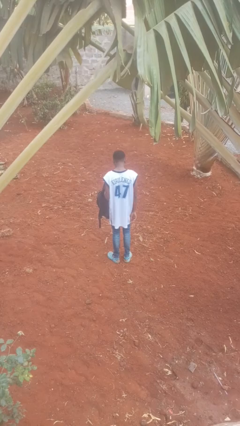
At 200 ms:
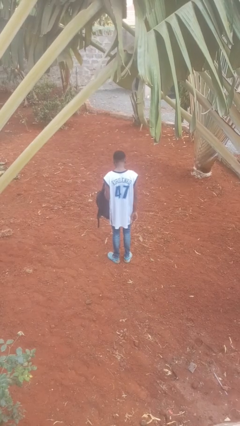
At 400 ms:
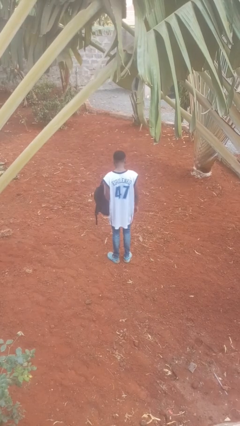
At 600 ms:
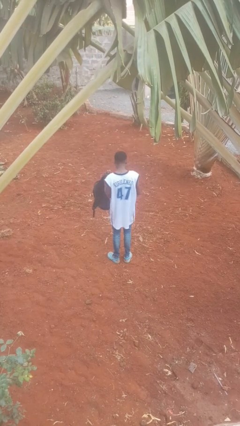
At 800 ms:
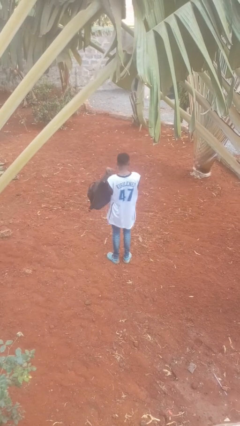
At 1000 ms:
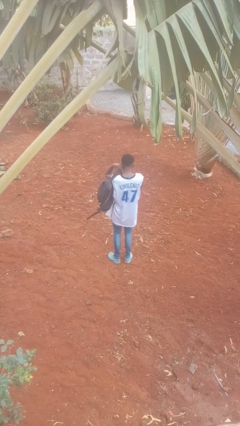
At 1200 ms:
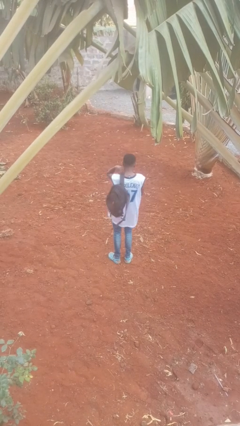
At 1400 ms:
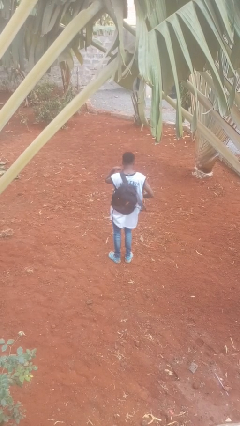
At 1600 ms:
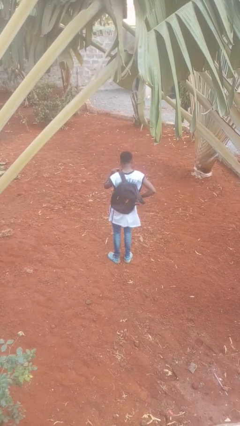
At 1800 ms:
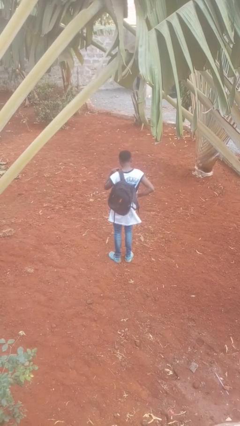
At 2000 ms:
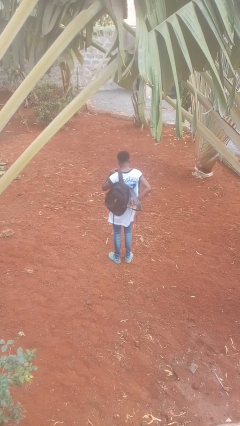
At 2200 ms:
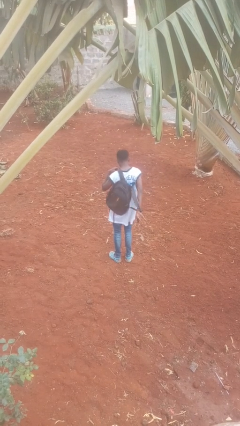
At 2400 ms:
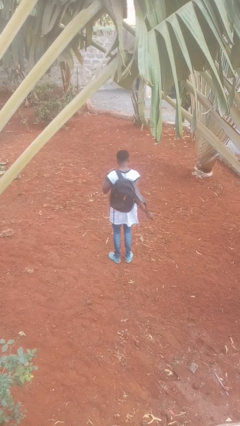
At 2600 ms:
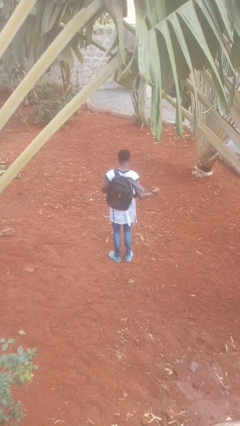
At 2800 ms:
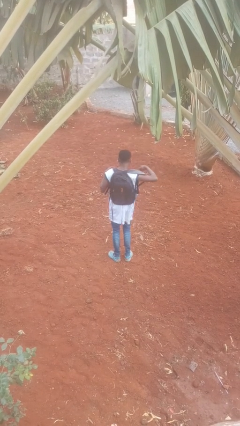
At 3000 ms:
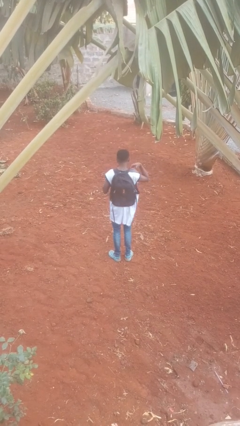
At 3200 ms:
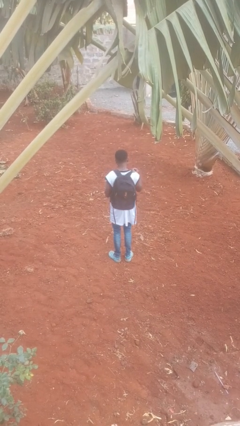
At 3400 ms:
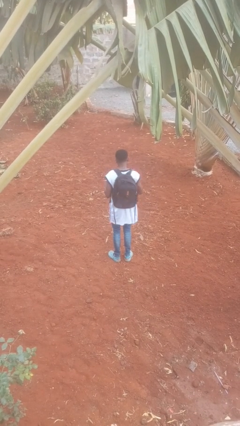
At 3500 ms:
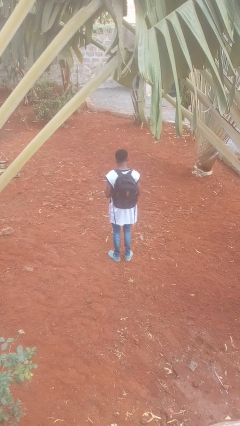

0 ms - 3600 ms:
person puts on backpack

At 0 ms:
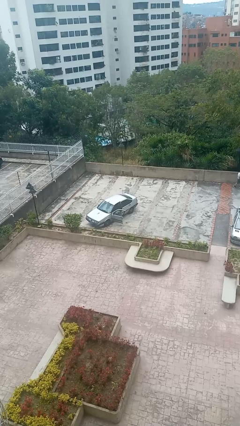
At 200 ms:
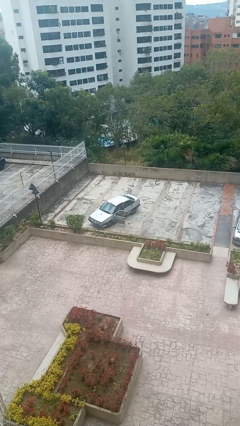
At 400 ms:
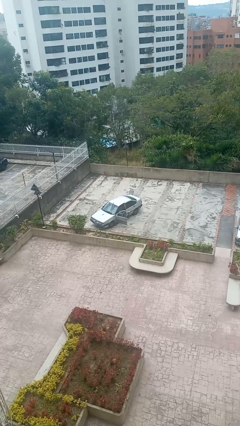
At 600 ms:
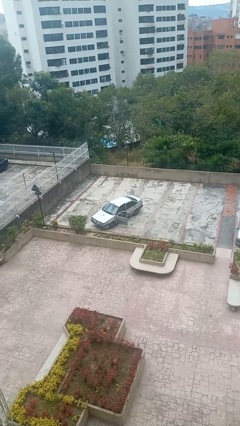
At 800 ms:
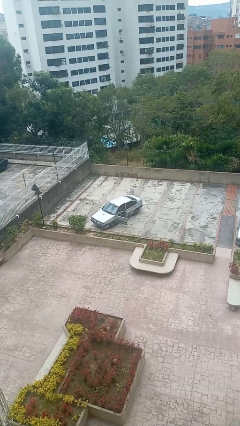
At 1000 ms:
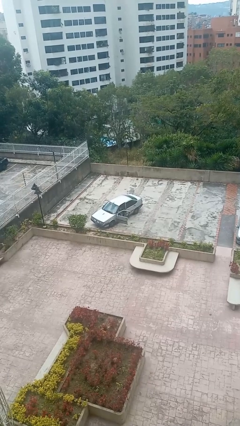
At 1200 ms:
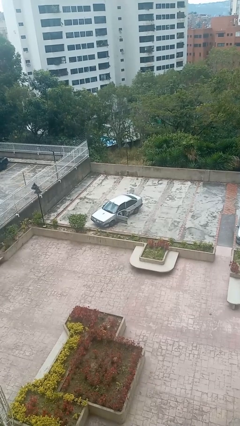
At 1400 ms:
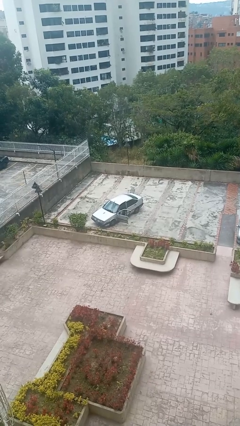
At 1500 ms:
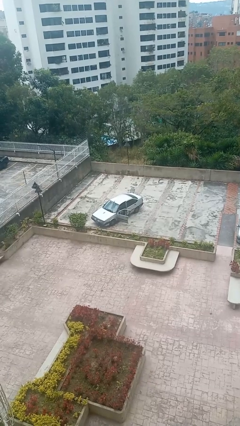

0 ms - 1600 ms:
person enters car

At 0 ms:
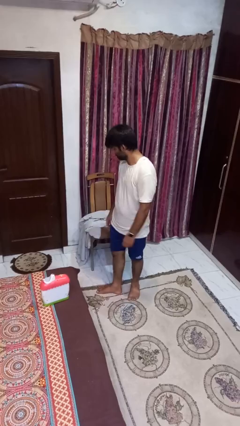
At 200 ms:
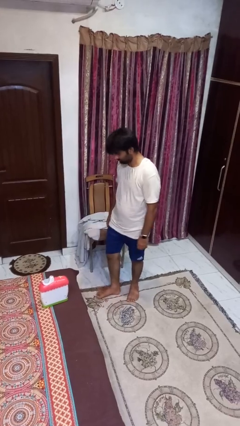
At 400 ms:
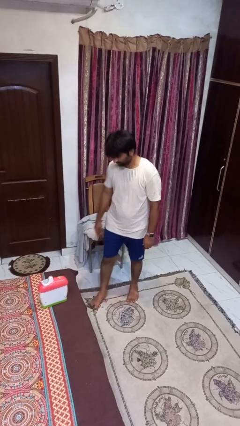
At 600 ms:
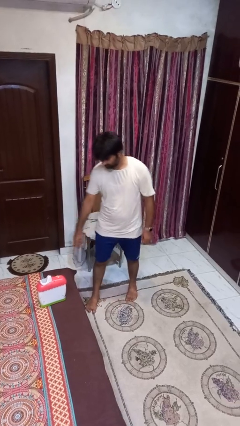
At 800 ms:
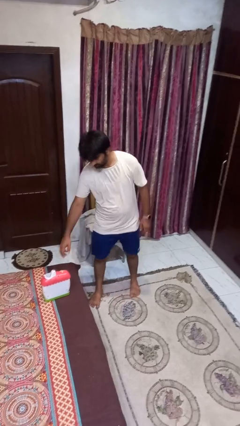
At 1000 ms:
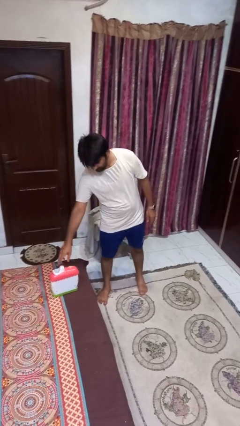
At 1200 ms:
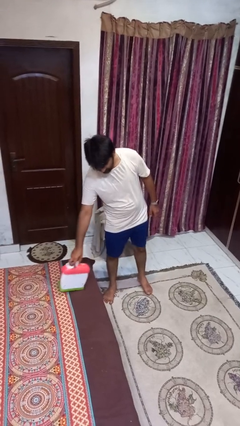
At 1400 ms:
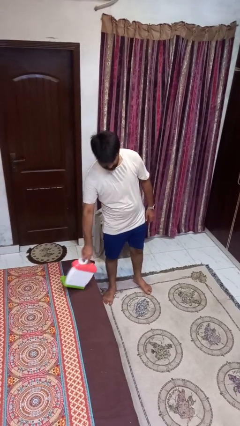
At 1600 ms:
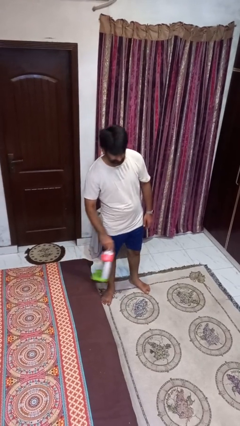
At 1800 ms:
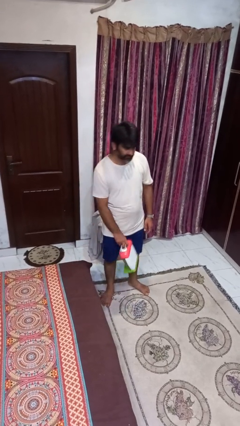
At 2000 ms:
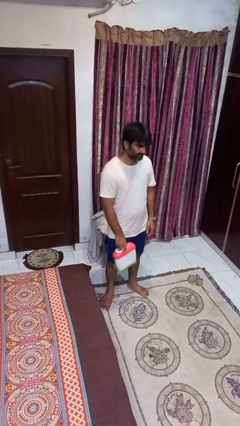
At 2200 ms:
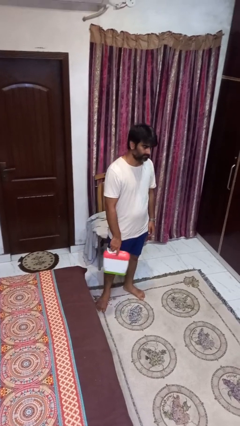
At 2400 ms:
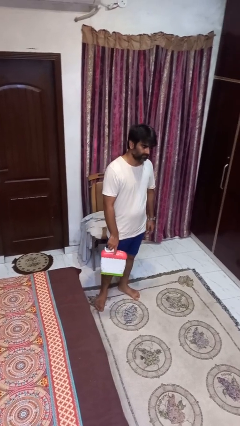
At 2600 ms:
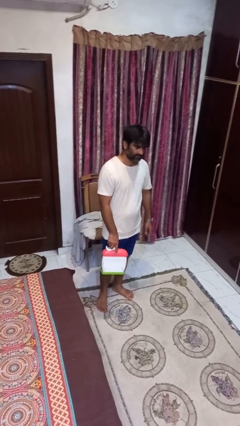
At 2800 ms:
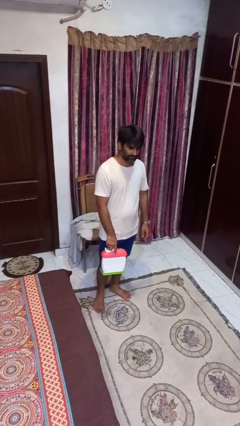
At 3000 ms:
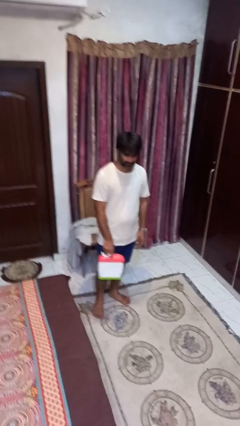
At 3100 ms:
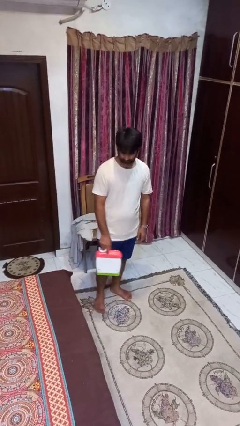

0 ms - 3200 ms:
person picks up object from bed

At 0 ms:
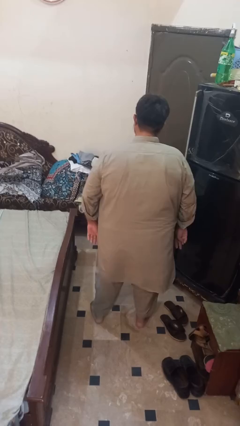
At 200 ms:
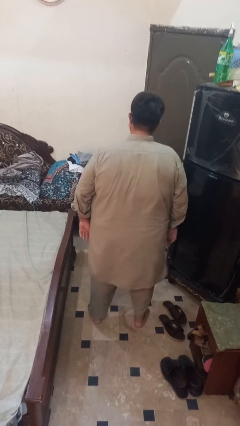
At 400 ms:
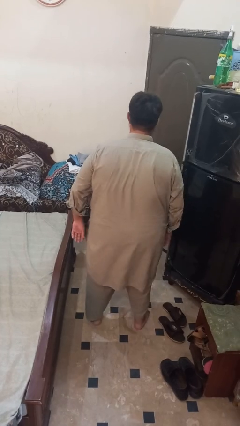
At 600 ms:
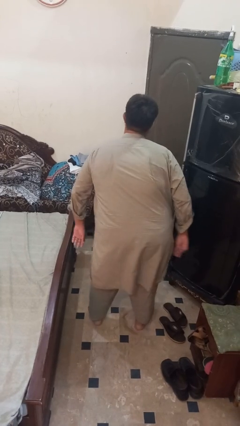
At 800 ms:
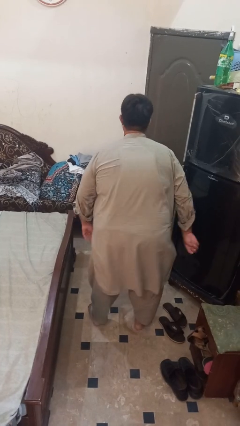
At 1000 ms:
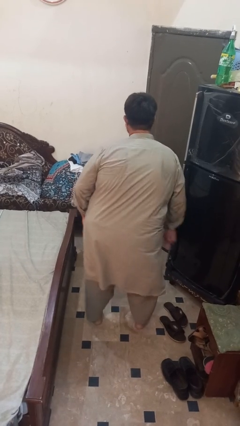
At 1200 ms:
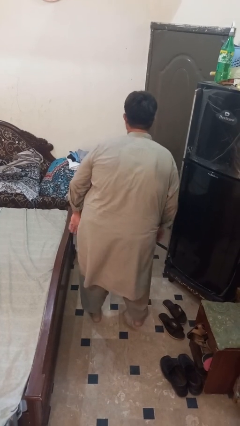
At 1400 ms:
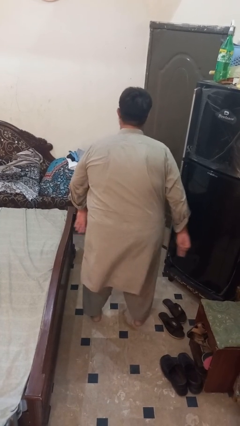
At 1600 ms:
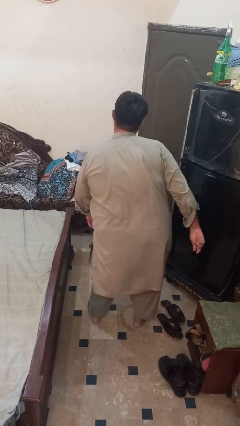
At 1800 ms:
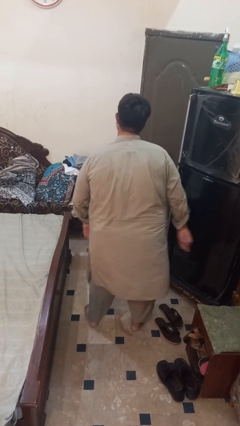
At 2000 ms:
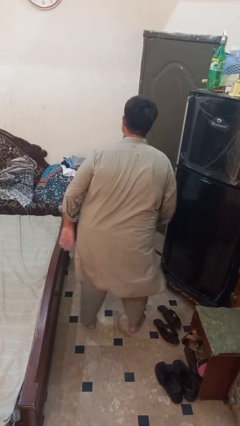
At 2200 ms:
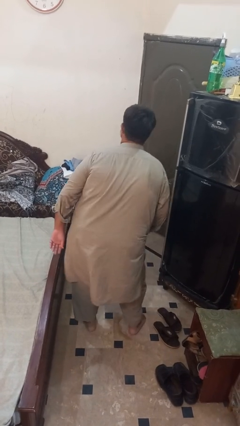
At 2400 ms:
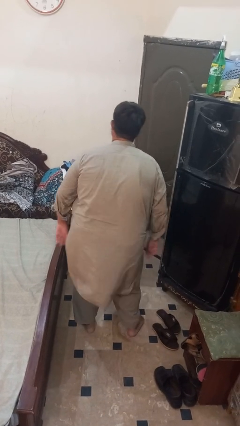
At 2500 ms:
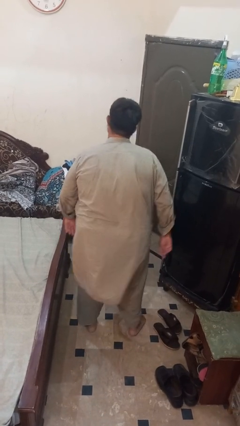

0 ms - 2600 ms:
person wiggles hips

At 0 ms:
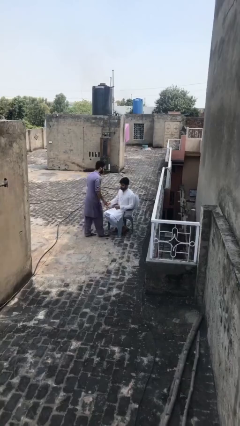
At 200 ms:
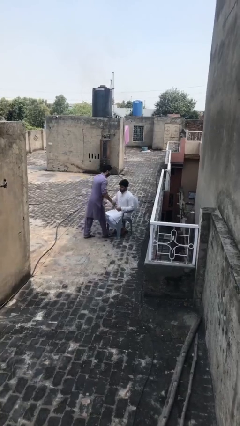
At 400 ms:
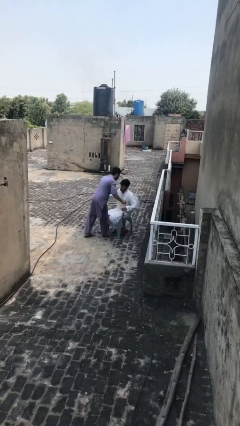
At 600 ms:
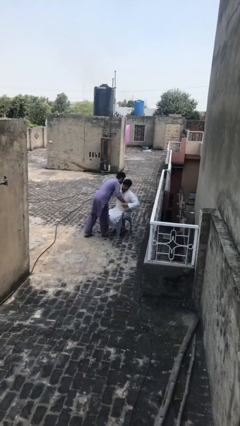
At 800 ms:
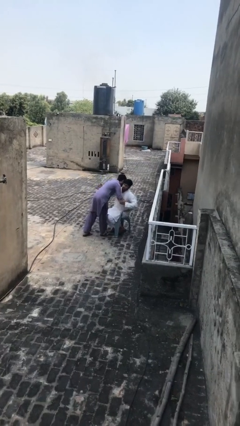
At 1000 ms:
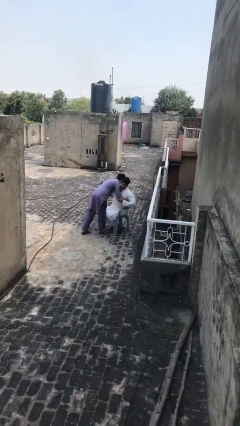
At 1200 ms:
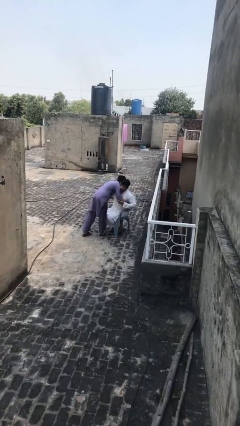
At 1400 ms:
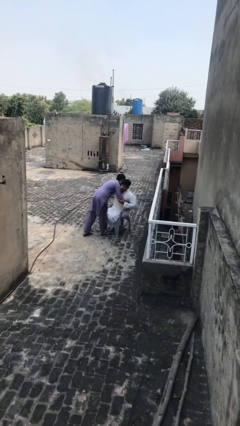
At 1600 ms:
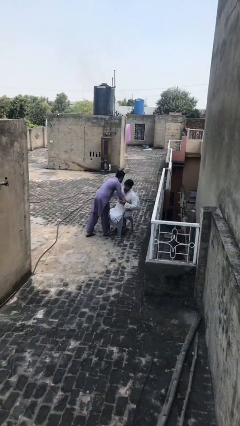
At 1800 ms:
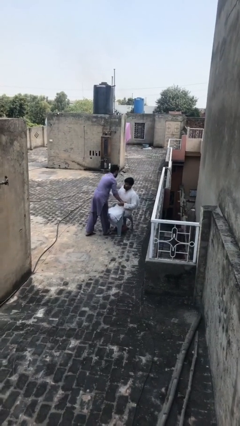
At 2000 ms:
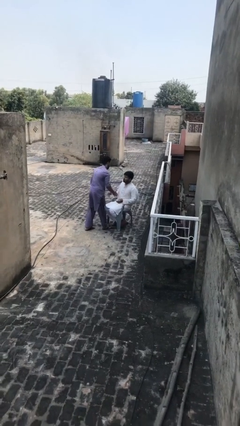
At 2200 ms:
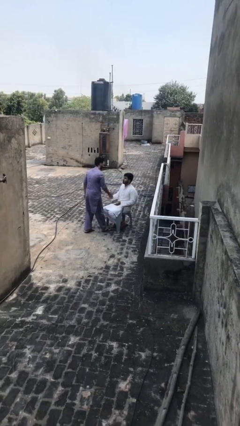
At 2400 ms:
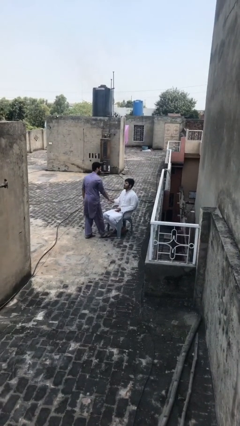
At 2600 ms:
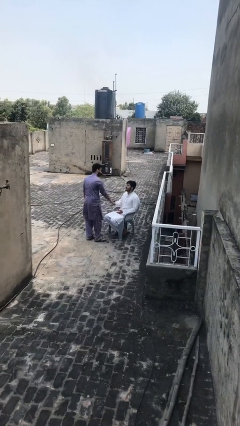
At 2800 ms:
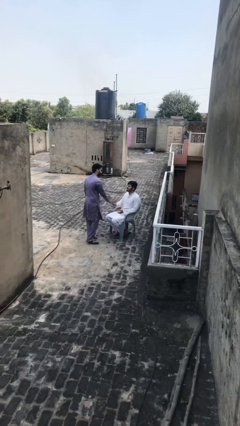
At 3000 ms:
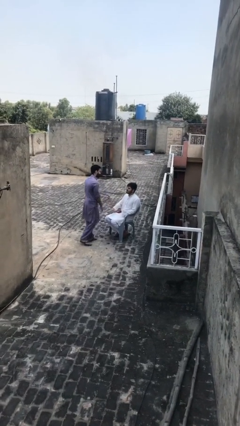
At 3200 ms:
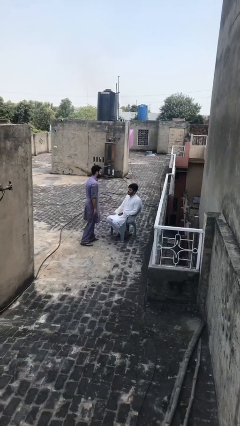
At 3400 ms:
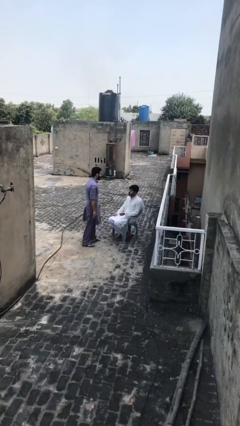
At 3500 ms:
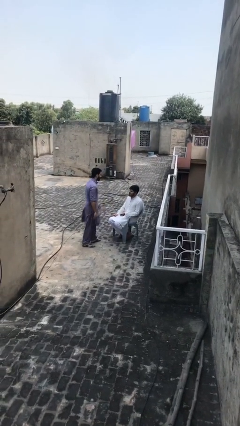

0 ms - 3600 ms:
person embraces person

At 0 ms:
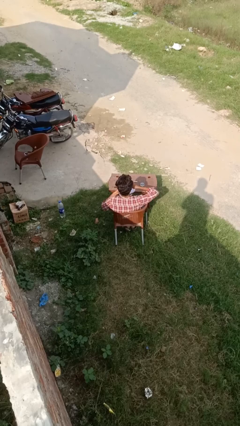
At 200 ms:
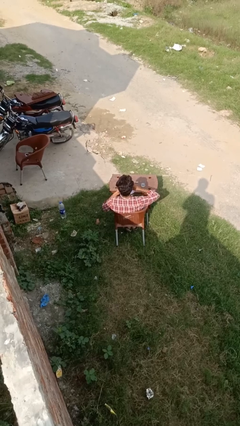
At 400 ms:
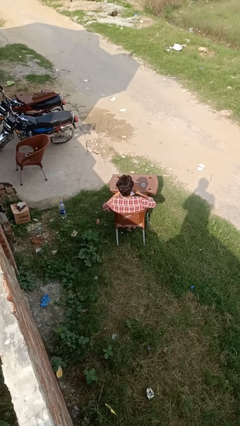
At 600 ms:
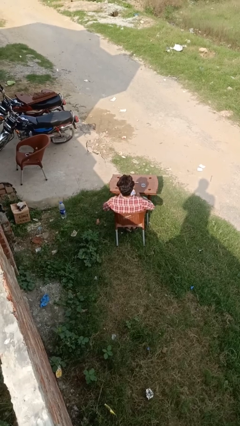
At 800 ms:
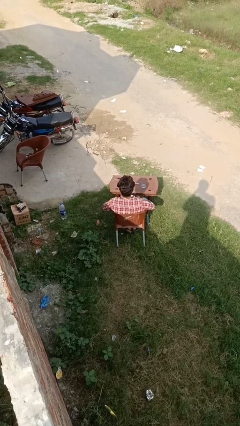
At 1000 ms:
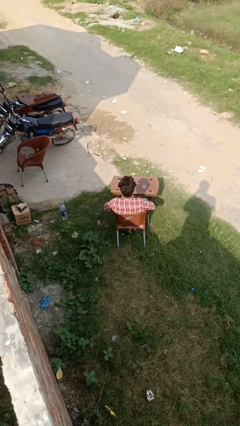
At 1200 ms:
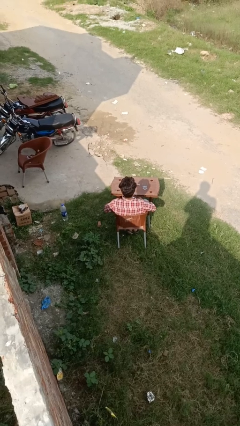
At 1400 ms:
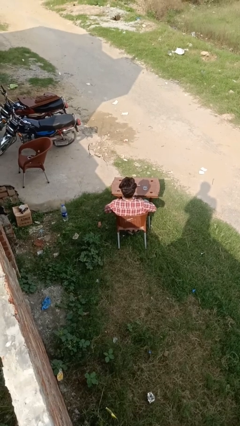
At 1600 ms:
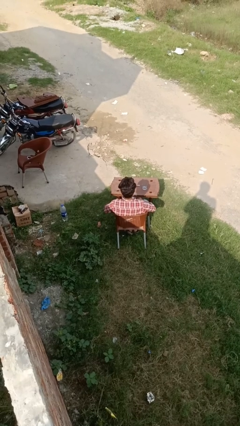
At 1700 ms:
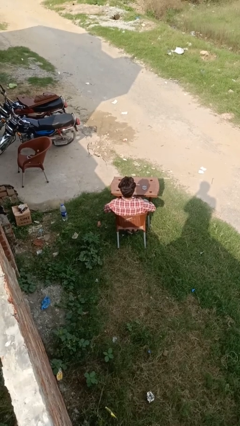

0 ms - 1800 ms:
person eats with hands

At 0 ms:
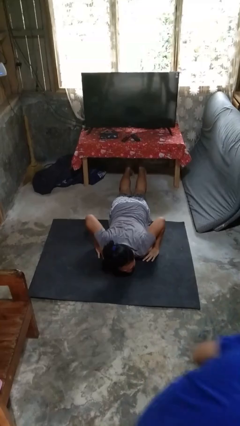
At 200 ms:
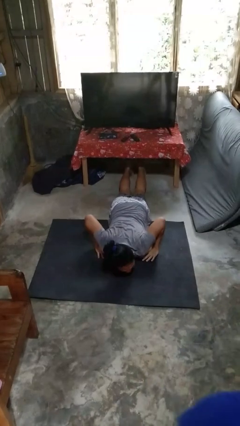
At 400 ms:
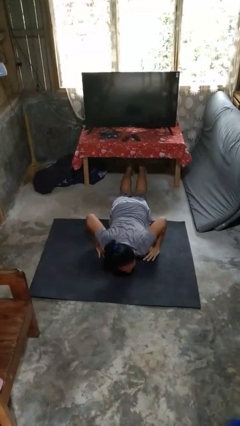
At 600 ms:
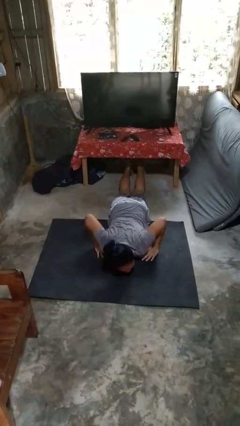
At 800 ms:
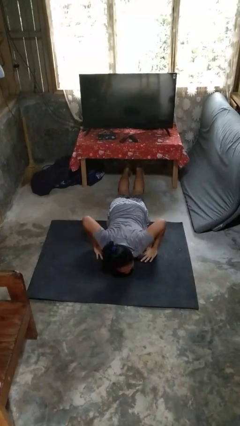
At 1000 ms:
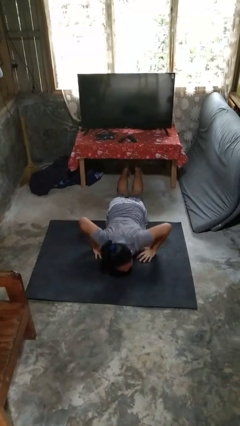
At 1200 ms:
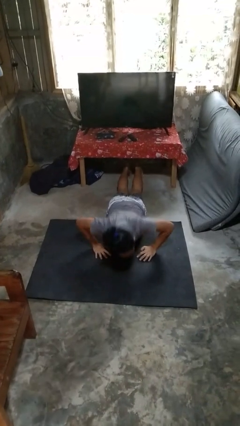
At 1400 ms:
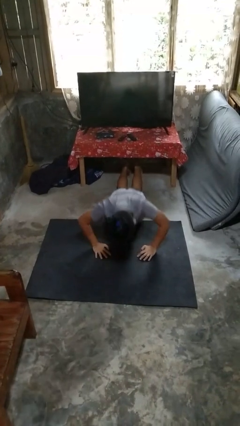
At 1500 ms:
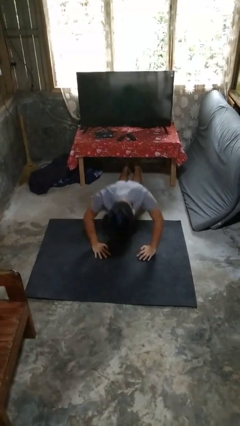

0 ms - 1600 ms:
person exercises with pushup
